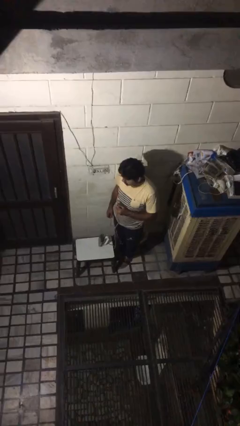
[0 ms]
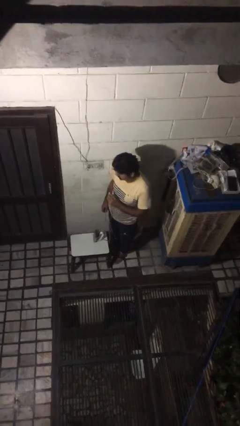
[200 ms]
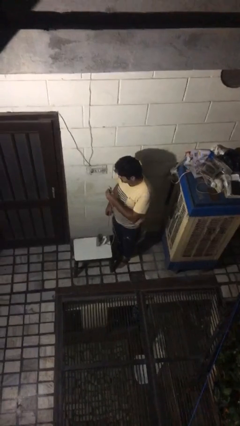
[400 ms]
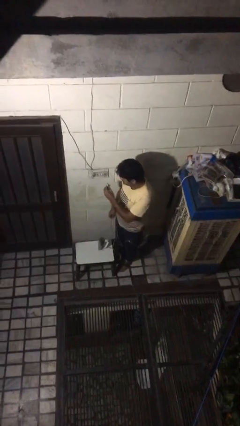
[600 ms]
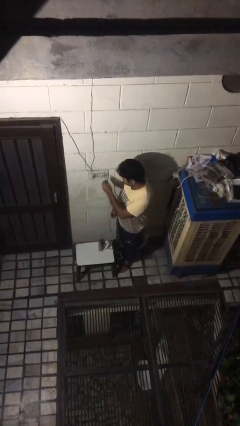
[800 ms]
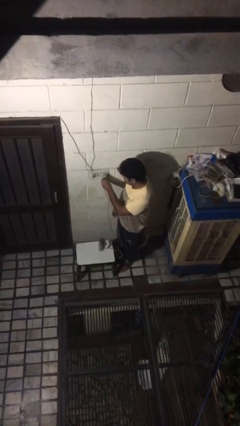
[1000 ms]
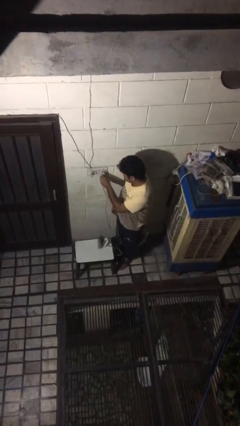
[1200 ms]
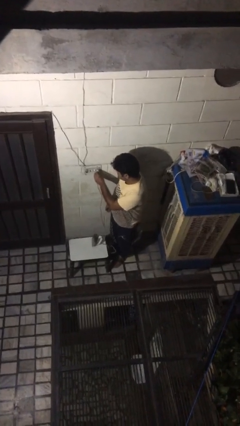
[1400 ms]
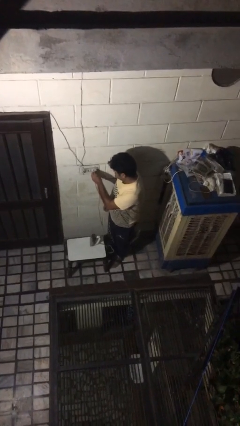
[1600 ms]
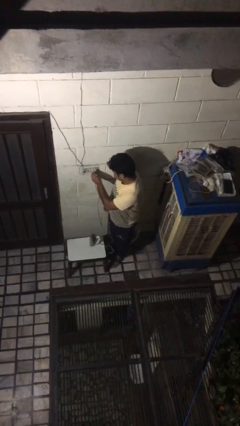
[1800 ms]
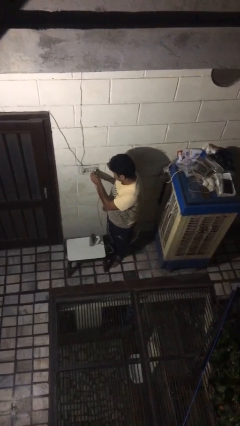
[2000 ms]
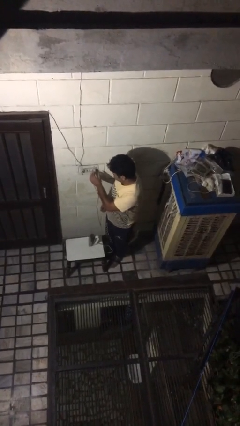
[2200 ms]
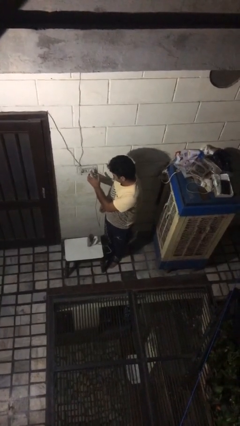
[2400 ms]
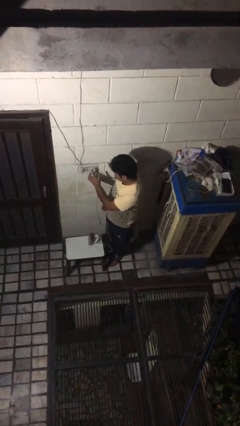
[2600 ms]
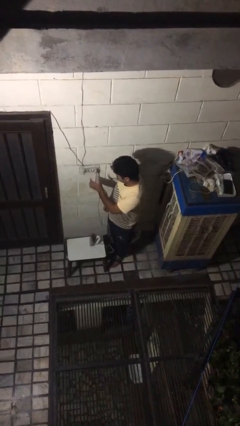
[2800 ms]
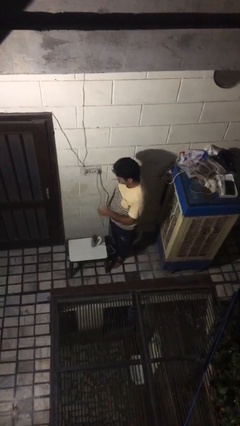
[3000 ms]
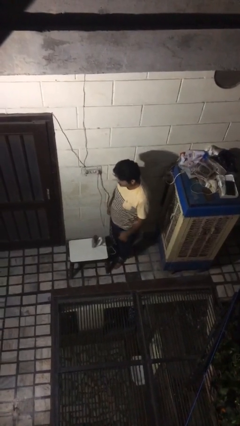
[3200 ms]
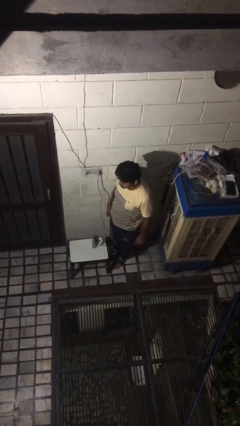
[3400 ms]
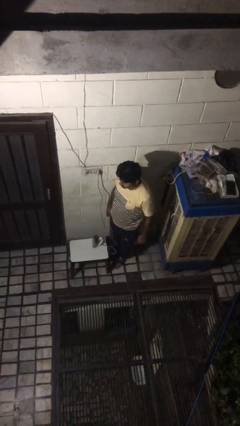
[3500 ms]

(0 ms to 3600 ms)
person plugs into electrical socket

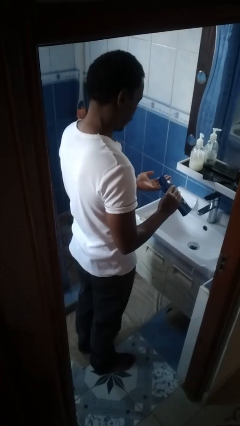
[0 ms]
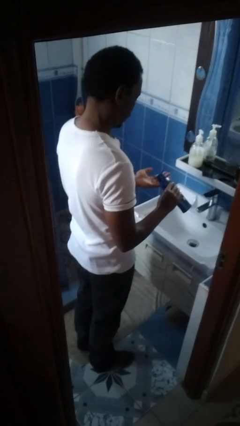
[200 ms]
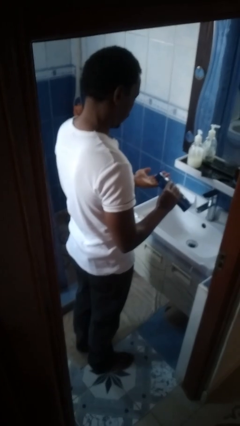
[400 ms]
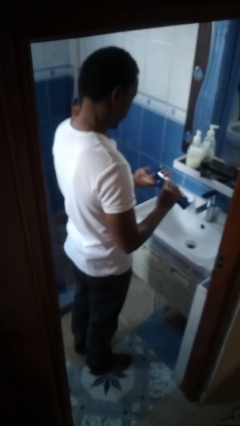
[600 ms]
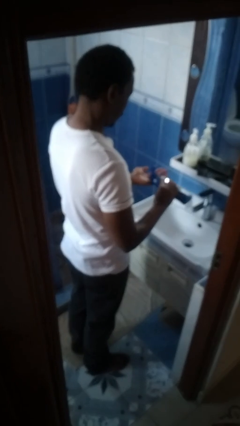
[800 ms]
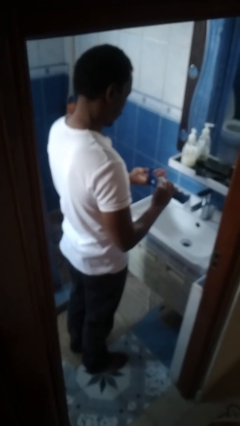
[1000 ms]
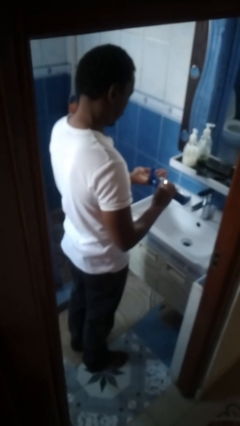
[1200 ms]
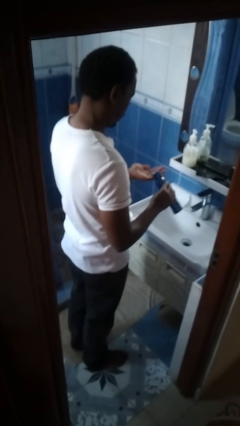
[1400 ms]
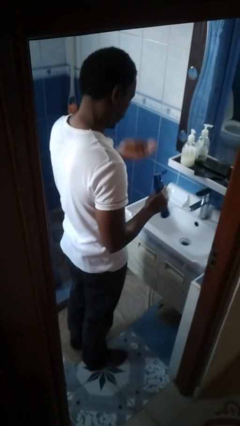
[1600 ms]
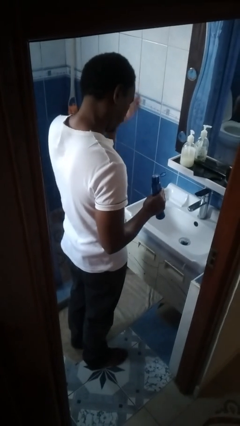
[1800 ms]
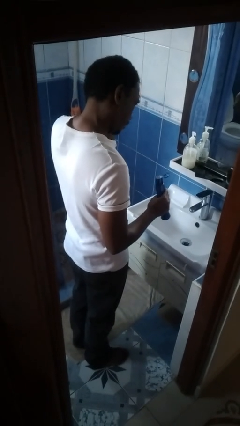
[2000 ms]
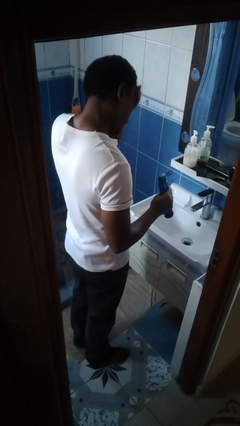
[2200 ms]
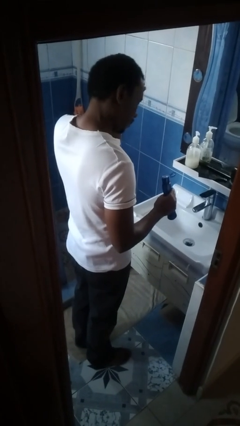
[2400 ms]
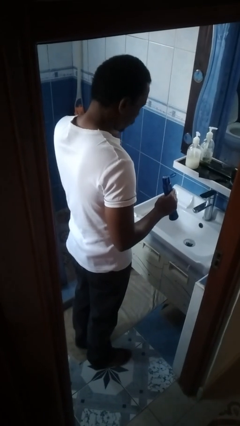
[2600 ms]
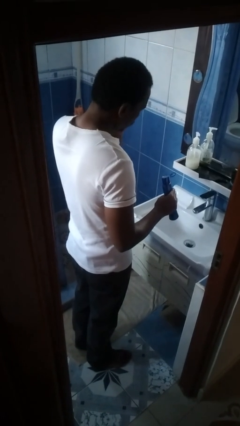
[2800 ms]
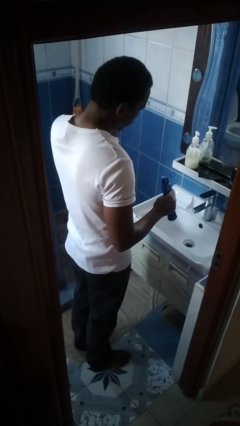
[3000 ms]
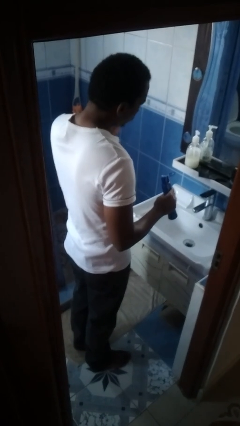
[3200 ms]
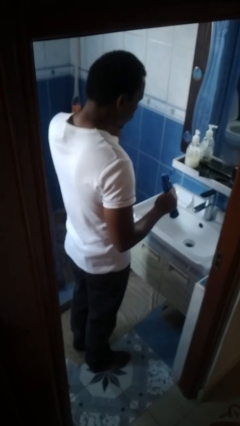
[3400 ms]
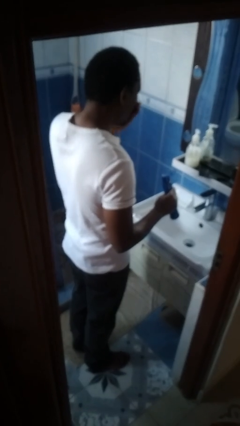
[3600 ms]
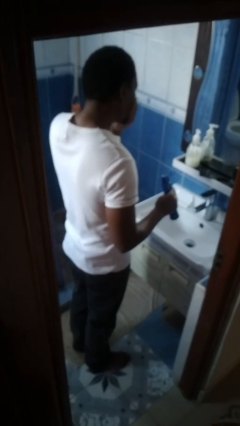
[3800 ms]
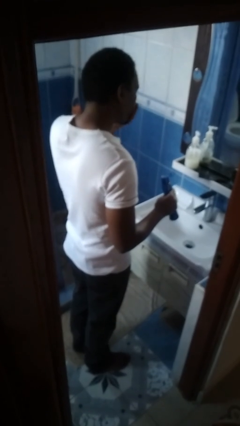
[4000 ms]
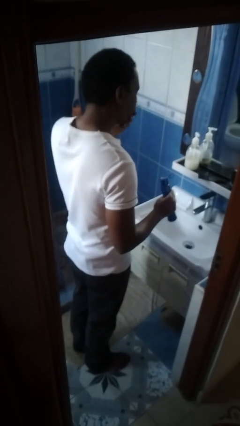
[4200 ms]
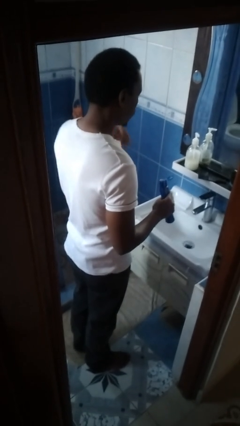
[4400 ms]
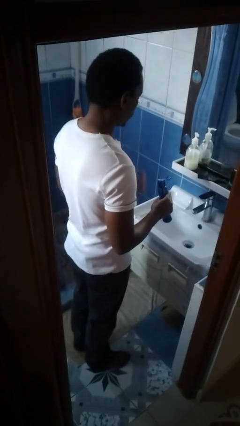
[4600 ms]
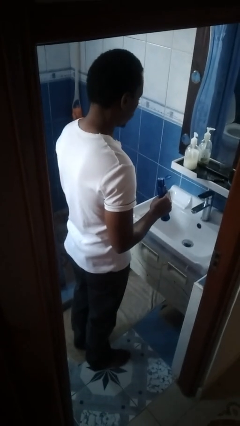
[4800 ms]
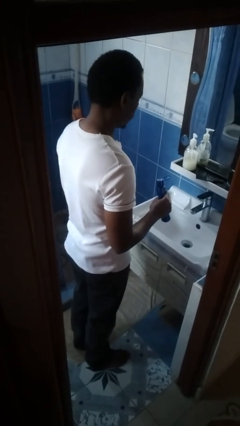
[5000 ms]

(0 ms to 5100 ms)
person applies facial moisturizer

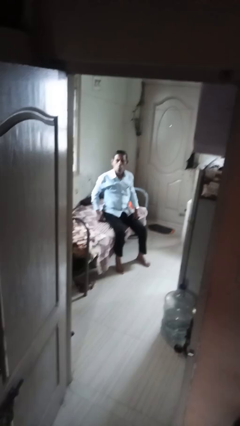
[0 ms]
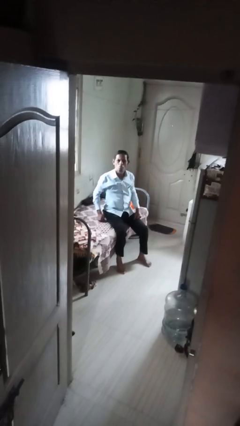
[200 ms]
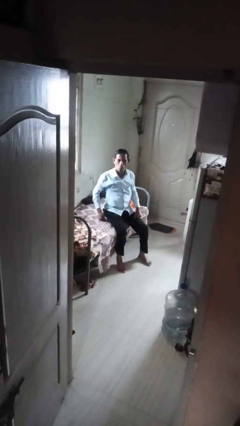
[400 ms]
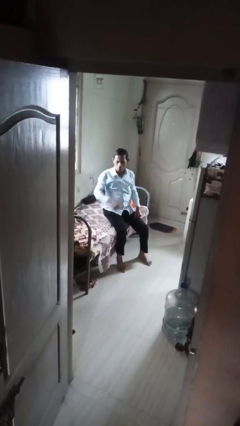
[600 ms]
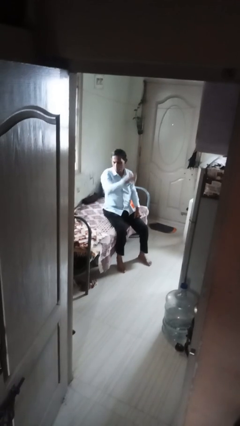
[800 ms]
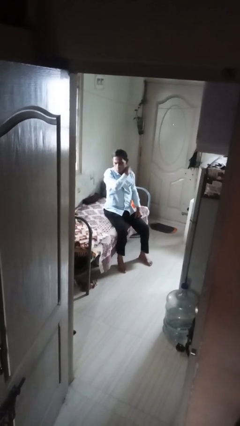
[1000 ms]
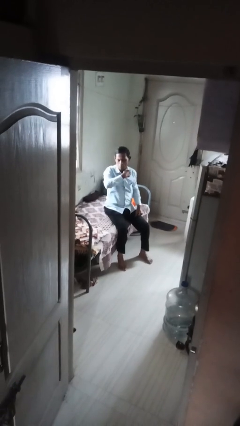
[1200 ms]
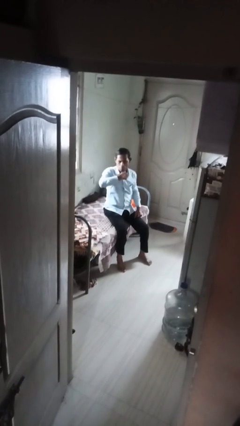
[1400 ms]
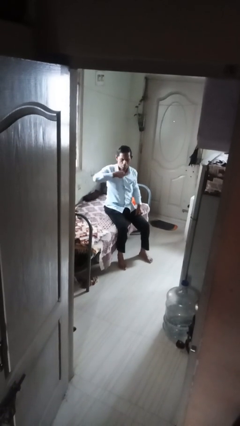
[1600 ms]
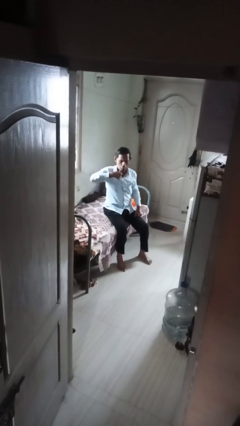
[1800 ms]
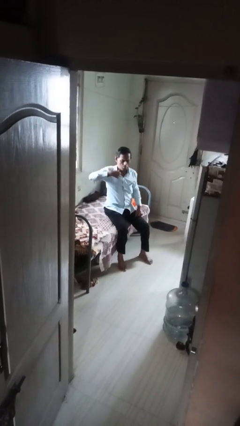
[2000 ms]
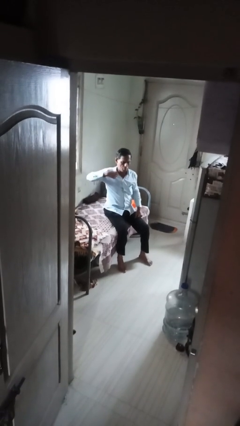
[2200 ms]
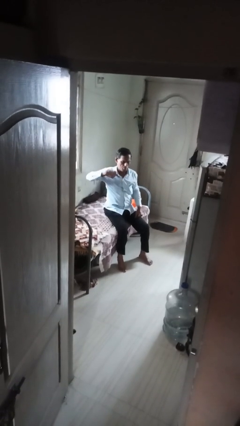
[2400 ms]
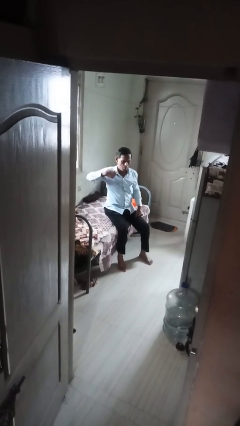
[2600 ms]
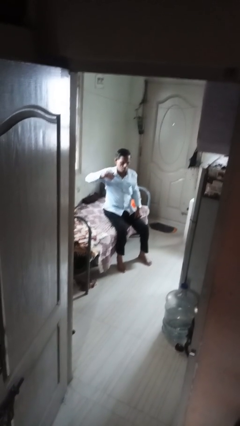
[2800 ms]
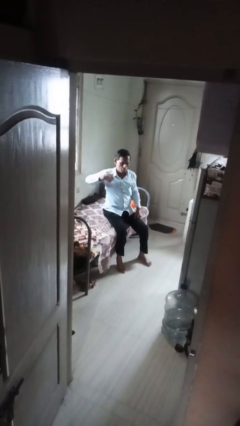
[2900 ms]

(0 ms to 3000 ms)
person gestures cut

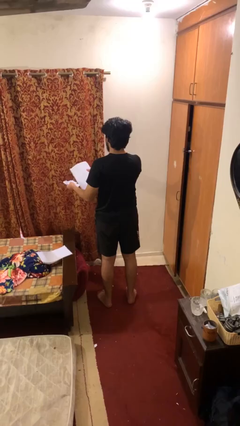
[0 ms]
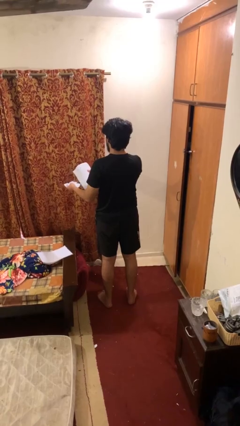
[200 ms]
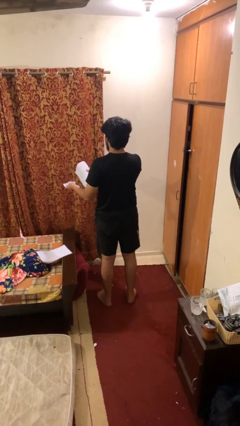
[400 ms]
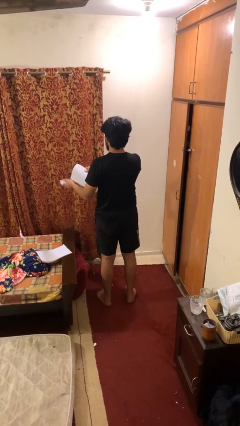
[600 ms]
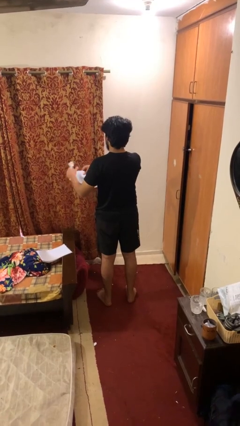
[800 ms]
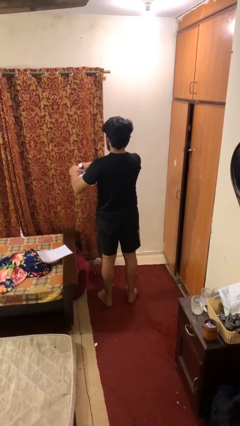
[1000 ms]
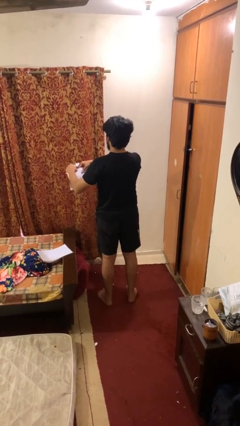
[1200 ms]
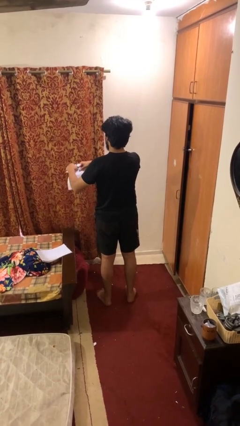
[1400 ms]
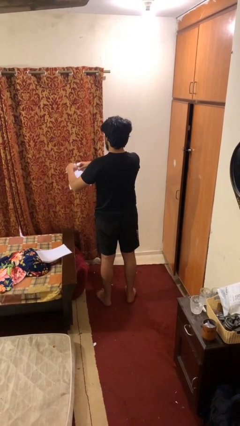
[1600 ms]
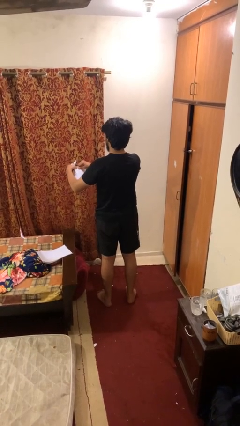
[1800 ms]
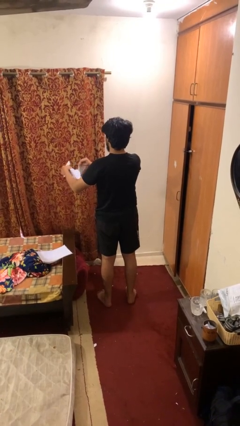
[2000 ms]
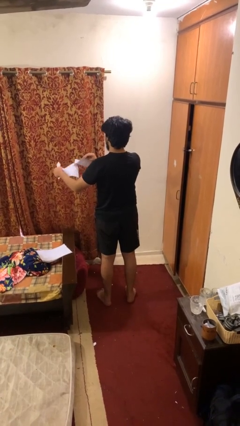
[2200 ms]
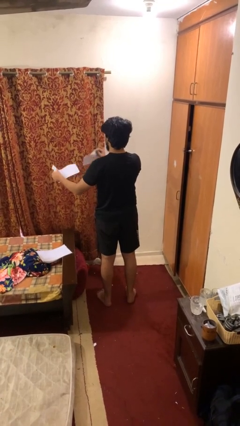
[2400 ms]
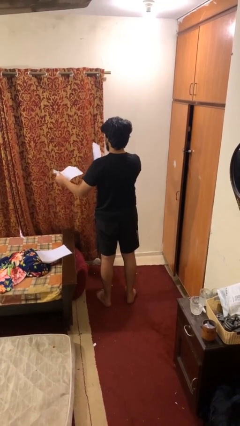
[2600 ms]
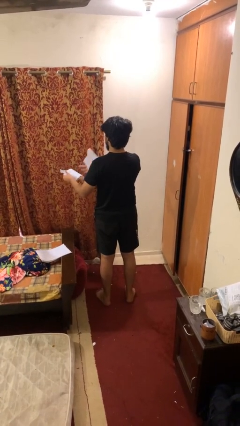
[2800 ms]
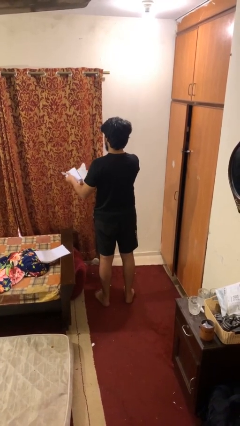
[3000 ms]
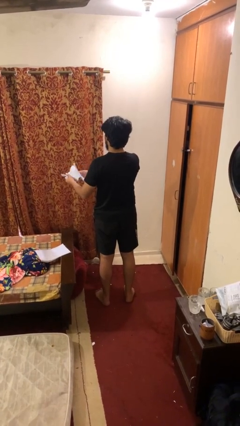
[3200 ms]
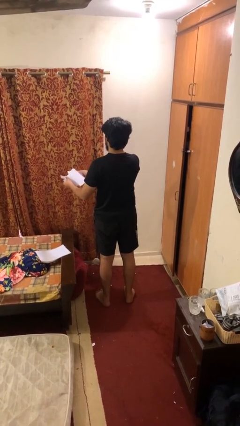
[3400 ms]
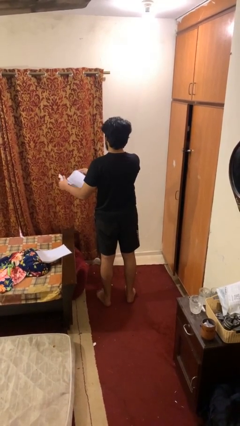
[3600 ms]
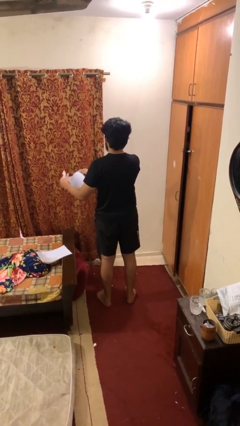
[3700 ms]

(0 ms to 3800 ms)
person tears paper

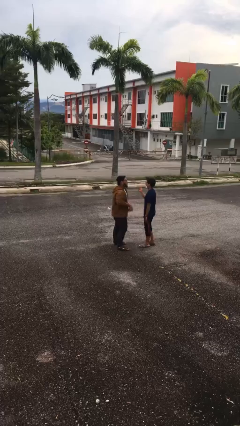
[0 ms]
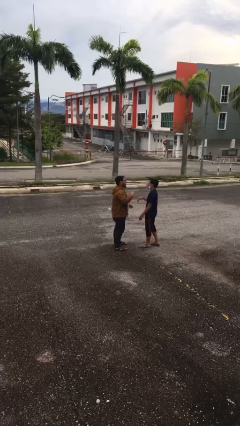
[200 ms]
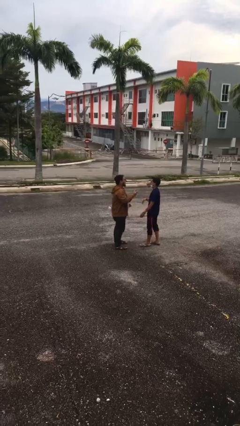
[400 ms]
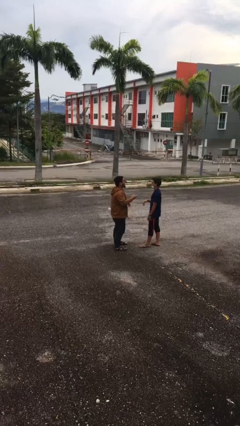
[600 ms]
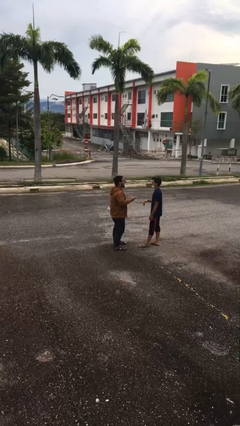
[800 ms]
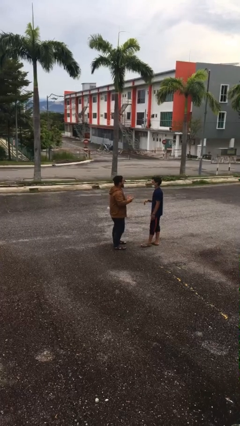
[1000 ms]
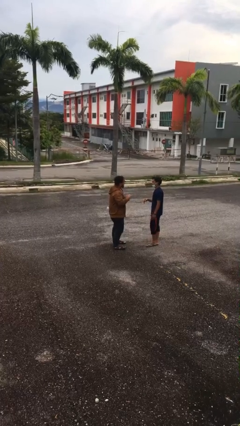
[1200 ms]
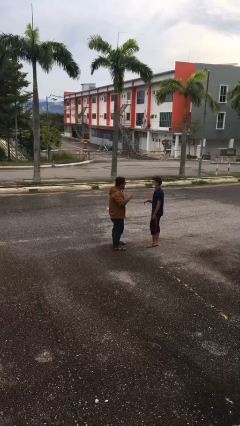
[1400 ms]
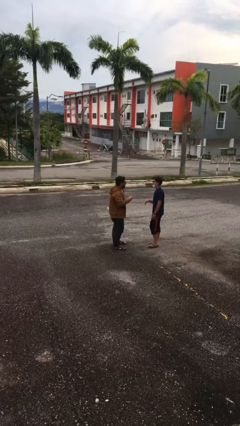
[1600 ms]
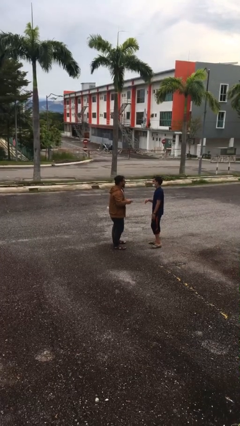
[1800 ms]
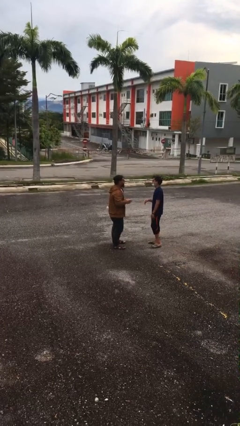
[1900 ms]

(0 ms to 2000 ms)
person talks to person
